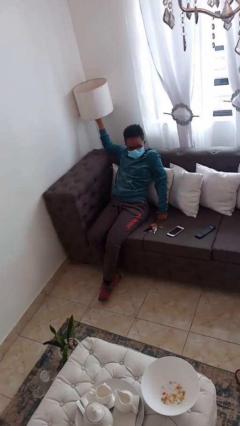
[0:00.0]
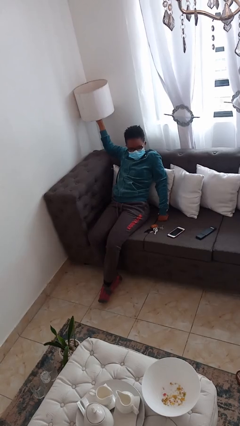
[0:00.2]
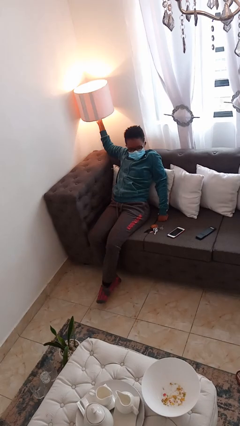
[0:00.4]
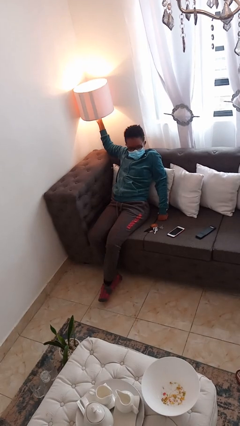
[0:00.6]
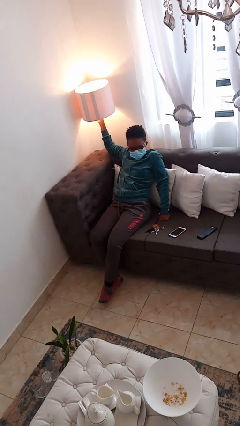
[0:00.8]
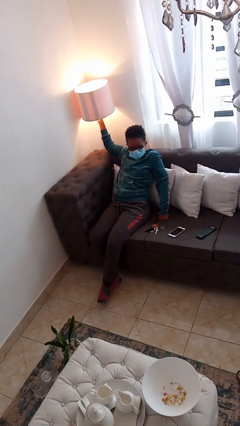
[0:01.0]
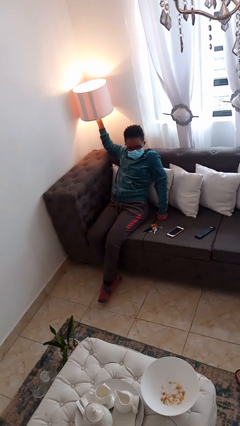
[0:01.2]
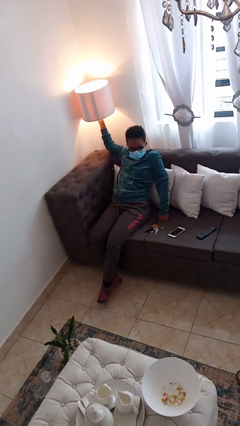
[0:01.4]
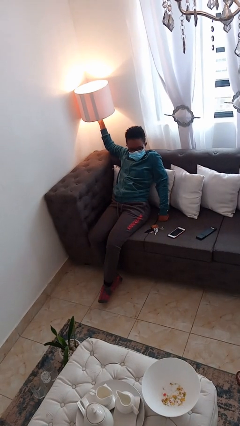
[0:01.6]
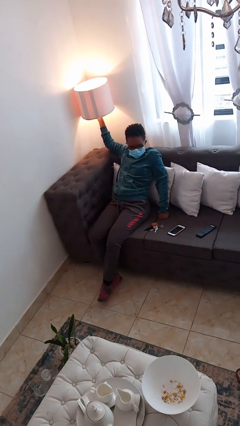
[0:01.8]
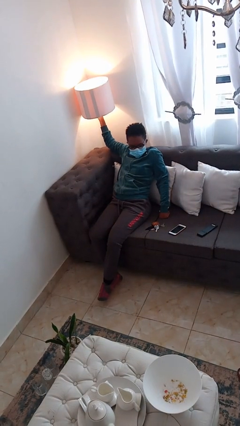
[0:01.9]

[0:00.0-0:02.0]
person turns on lamp

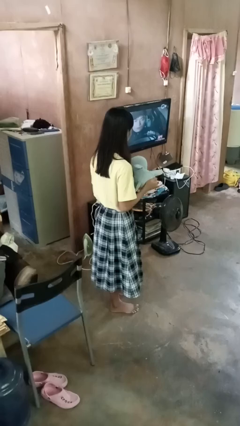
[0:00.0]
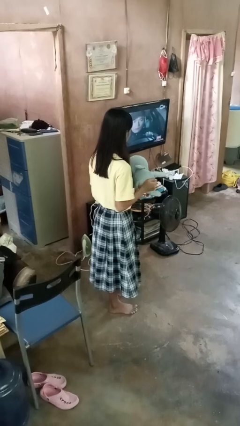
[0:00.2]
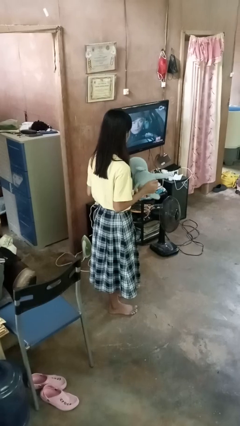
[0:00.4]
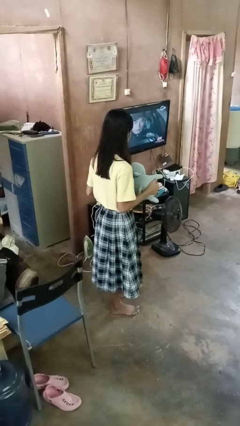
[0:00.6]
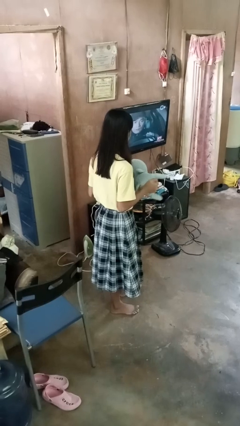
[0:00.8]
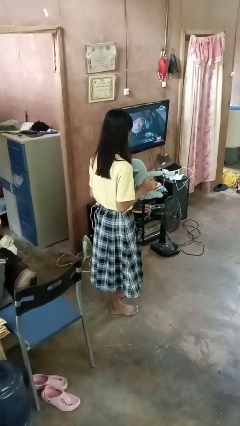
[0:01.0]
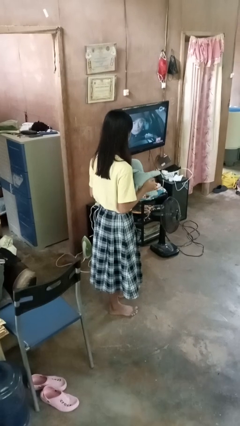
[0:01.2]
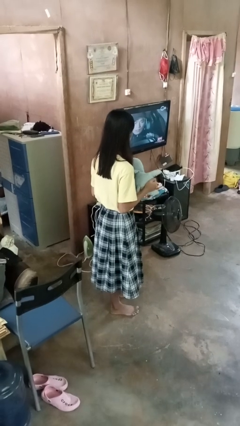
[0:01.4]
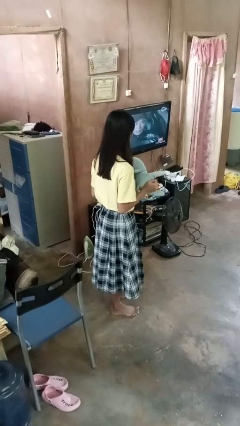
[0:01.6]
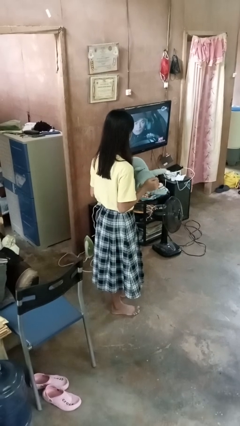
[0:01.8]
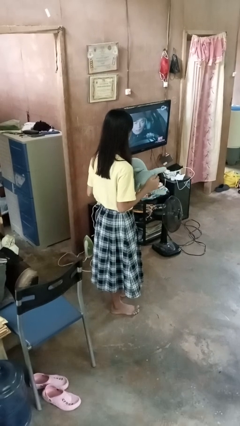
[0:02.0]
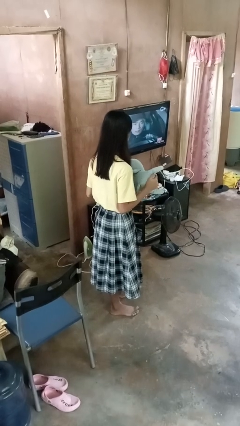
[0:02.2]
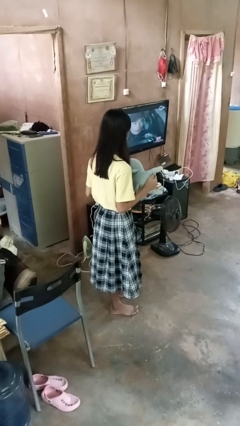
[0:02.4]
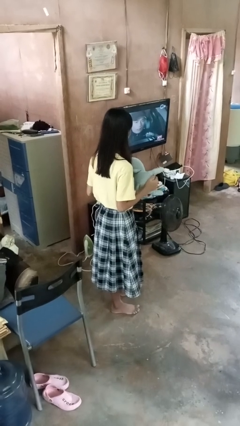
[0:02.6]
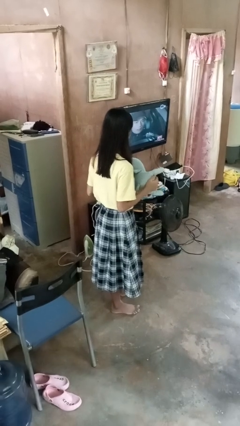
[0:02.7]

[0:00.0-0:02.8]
person squeezes object

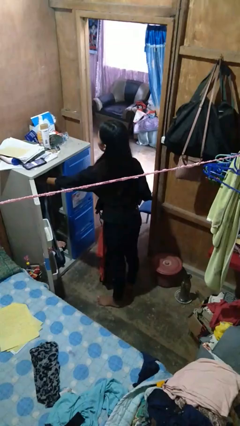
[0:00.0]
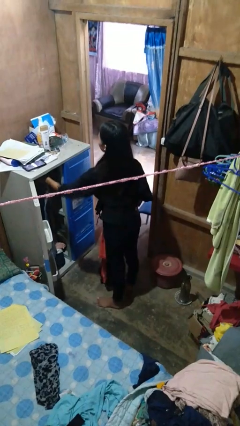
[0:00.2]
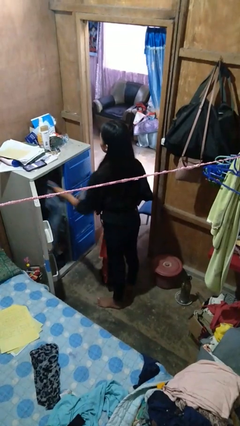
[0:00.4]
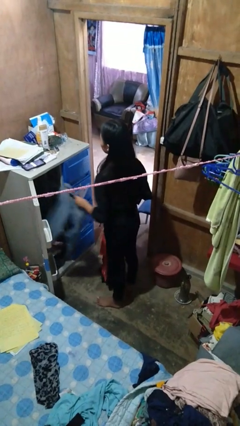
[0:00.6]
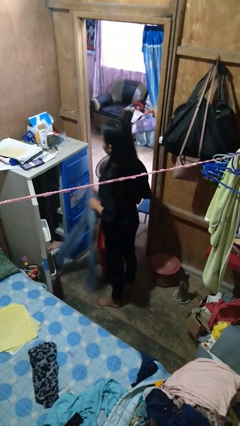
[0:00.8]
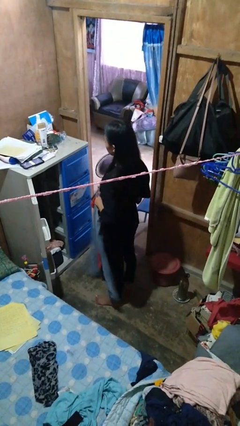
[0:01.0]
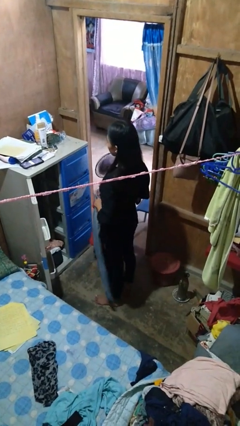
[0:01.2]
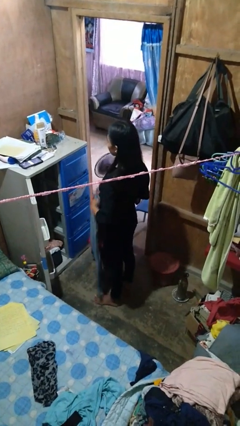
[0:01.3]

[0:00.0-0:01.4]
person takes clothes from closet

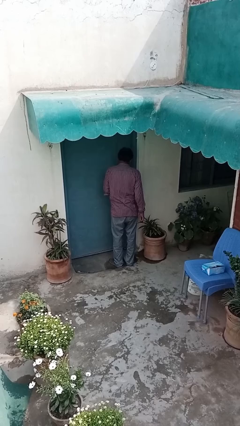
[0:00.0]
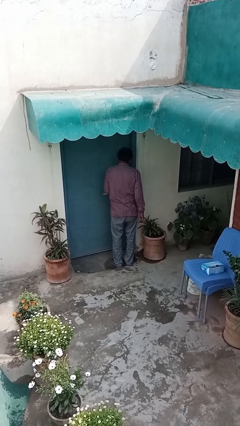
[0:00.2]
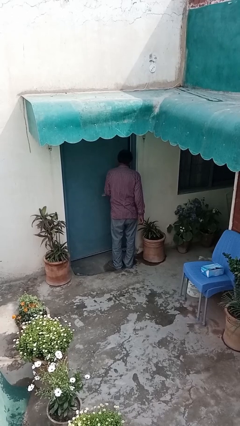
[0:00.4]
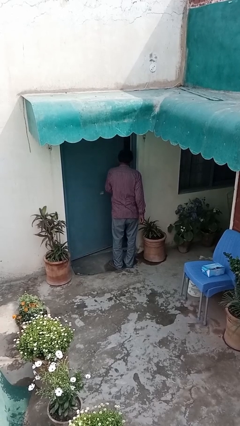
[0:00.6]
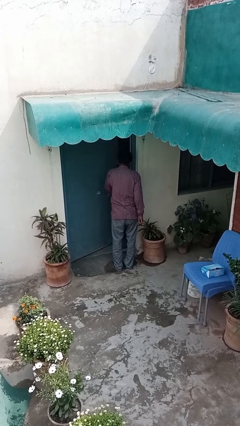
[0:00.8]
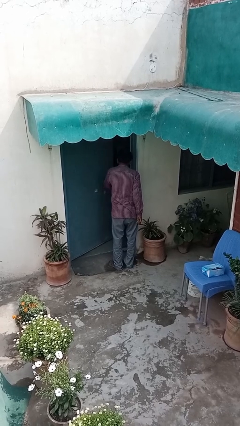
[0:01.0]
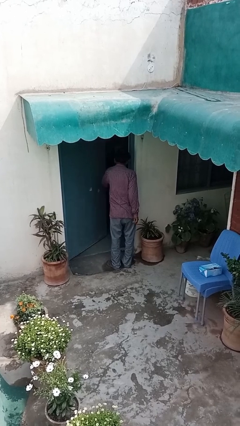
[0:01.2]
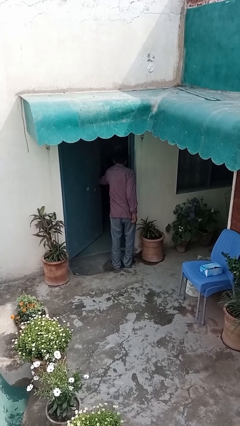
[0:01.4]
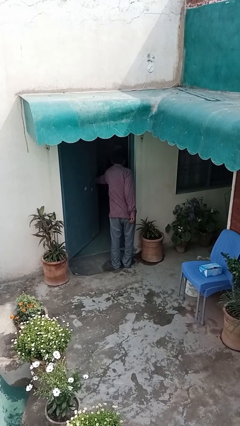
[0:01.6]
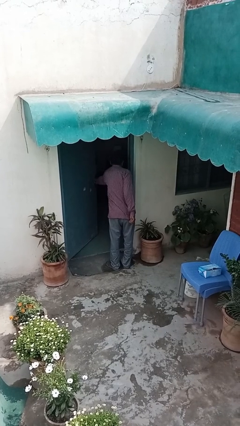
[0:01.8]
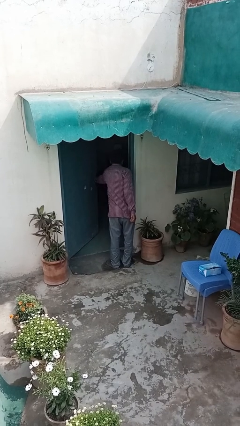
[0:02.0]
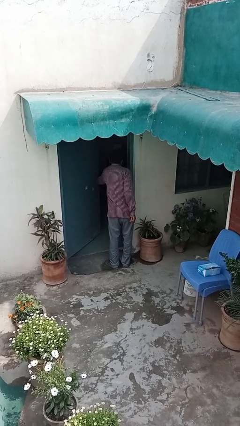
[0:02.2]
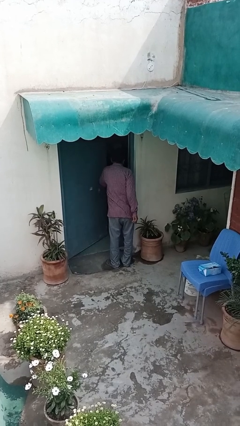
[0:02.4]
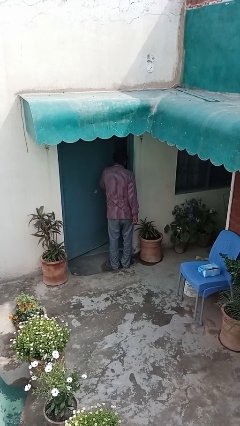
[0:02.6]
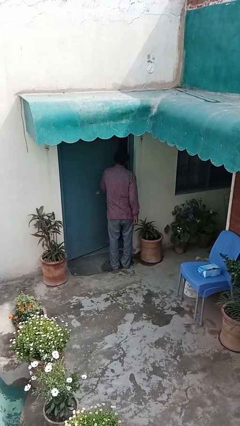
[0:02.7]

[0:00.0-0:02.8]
person opens facility door

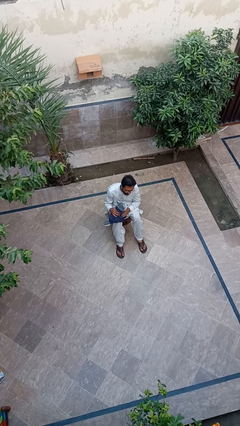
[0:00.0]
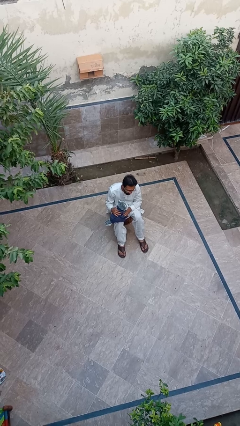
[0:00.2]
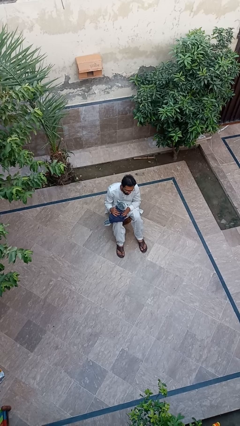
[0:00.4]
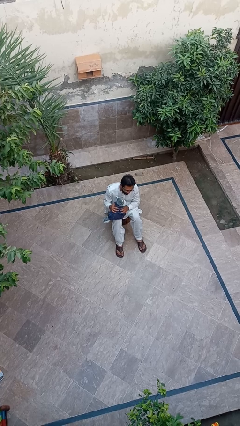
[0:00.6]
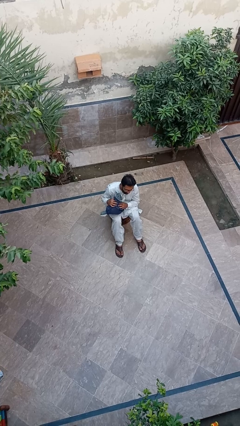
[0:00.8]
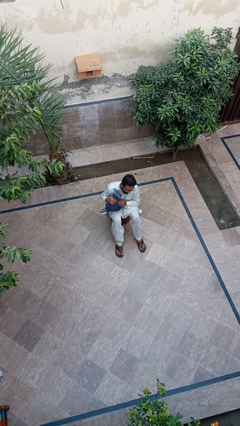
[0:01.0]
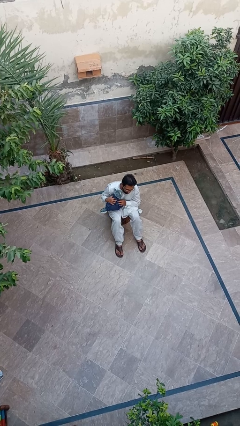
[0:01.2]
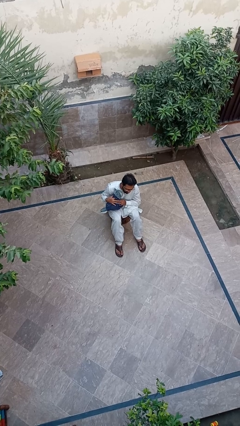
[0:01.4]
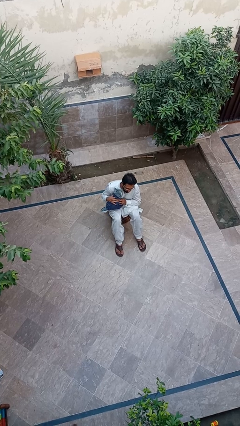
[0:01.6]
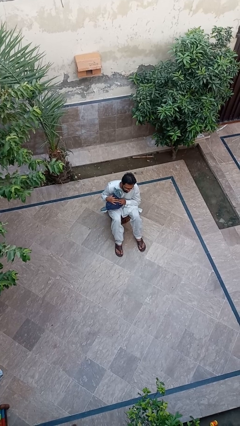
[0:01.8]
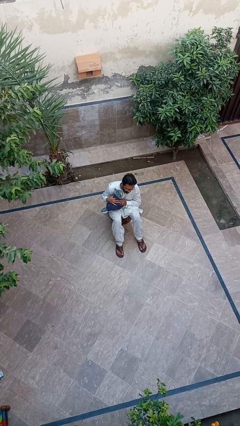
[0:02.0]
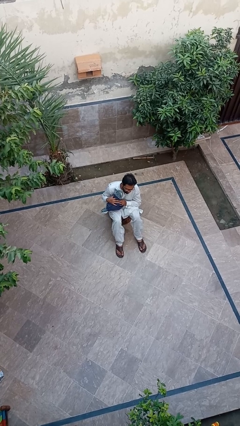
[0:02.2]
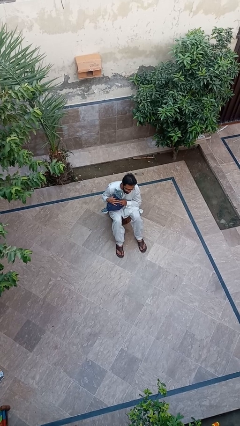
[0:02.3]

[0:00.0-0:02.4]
person hugs cat

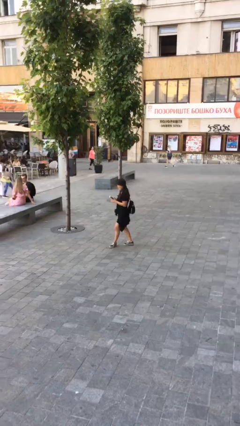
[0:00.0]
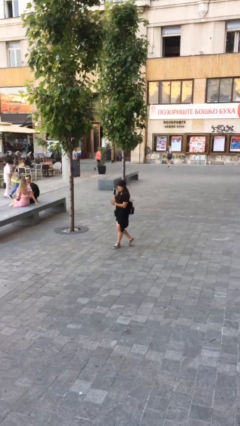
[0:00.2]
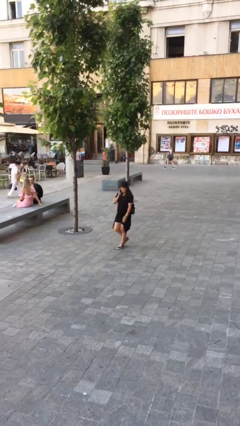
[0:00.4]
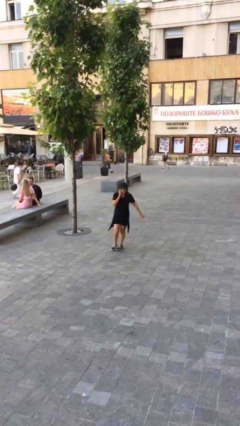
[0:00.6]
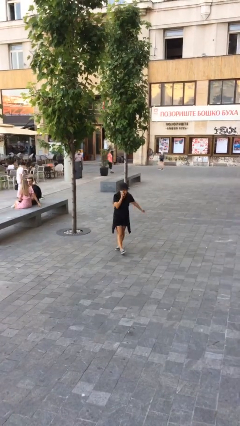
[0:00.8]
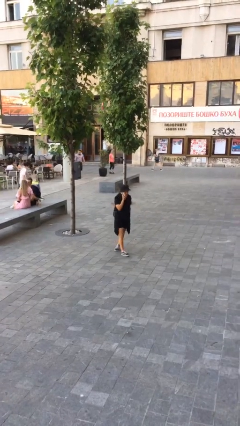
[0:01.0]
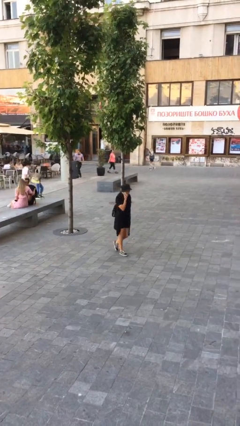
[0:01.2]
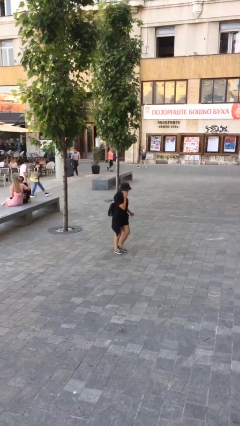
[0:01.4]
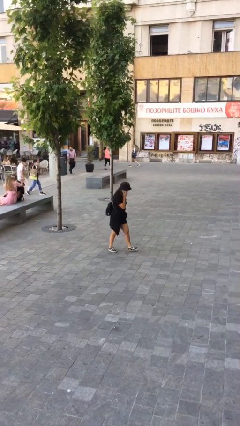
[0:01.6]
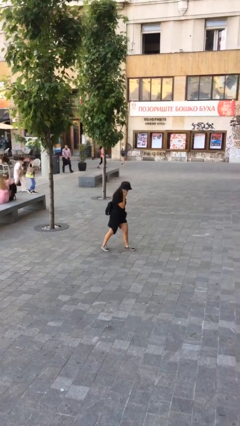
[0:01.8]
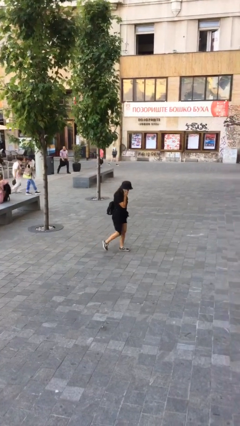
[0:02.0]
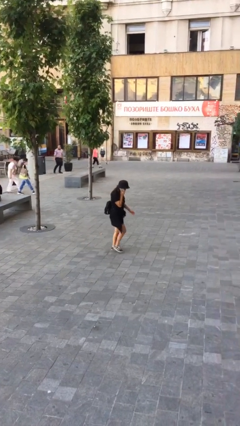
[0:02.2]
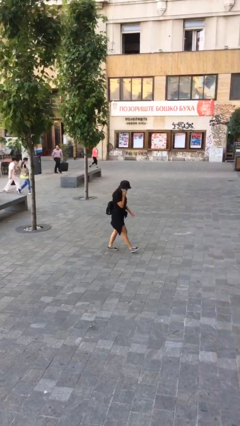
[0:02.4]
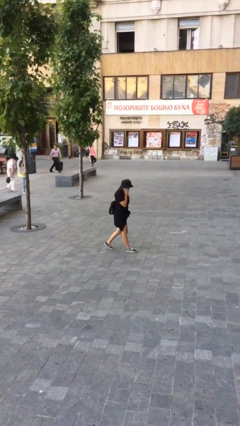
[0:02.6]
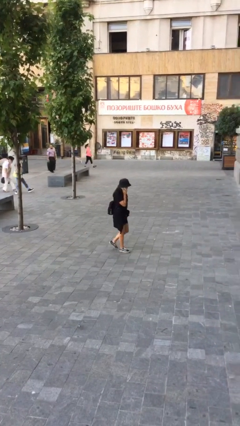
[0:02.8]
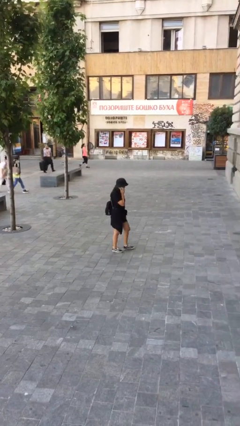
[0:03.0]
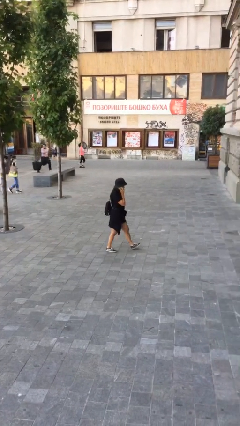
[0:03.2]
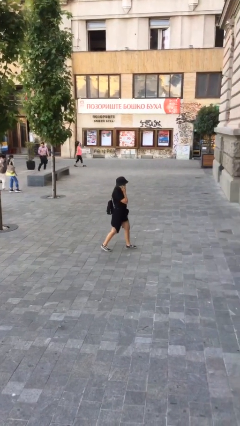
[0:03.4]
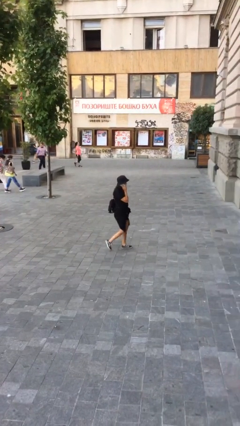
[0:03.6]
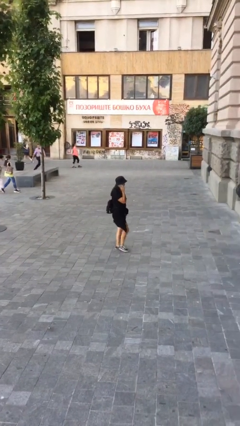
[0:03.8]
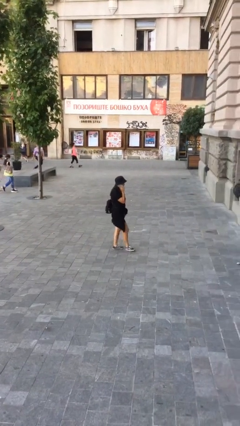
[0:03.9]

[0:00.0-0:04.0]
person talks on phone

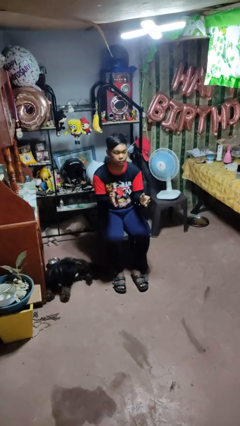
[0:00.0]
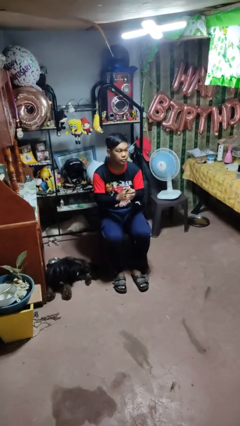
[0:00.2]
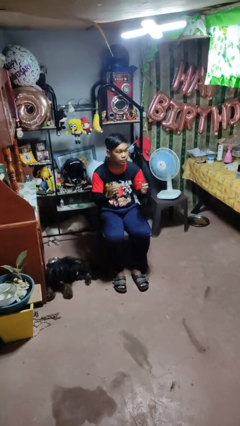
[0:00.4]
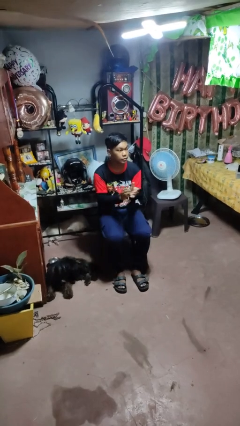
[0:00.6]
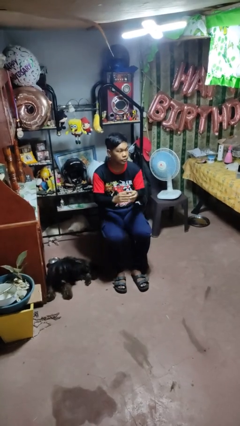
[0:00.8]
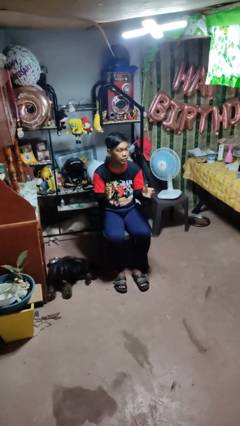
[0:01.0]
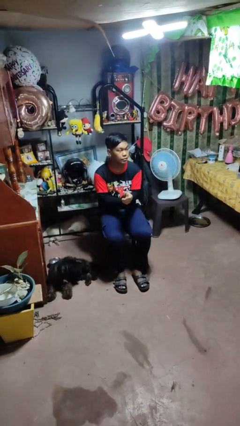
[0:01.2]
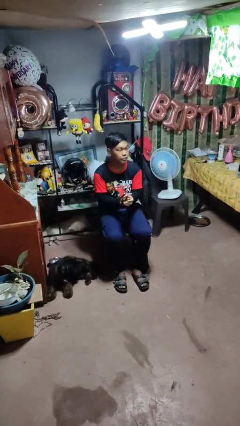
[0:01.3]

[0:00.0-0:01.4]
person claps hands
